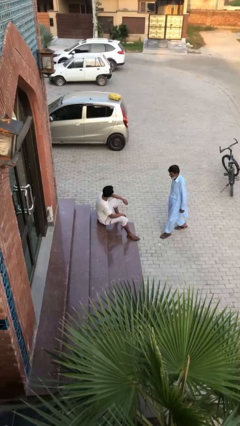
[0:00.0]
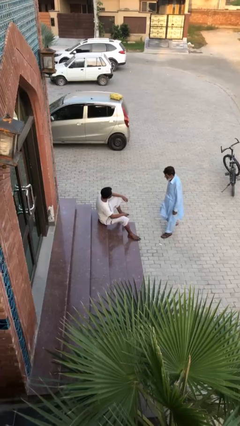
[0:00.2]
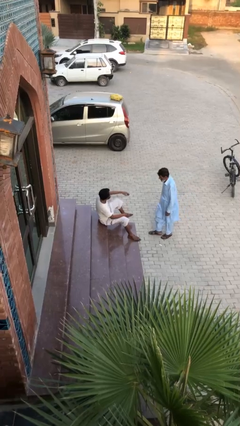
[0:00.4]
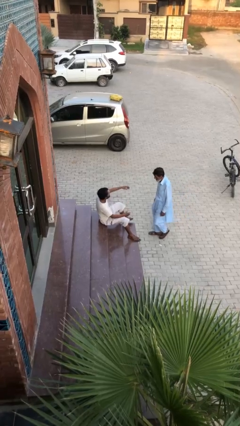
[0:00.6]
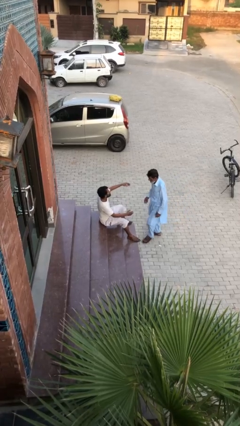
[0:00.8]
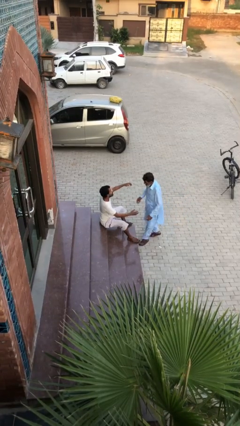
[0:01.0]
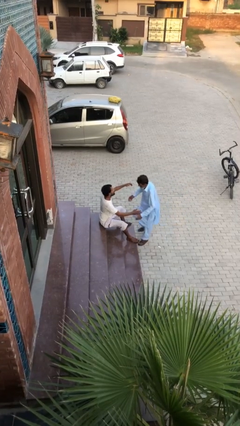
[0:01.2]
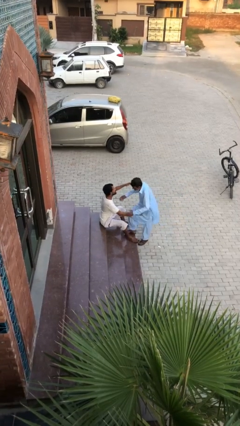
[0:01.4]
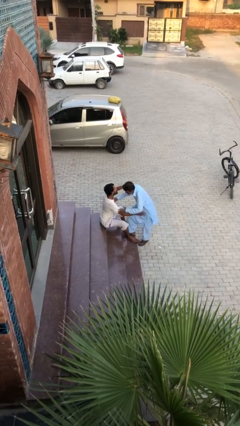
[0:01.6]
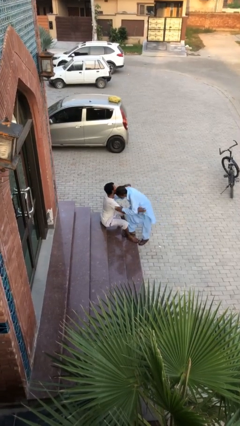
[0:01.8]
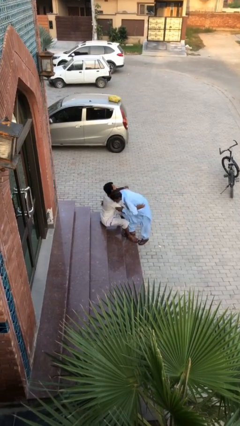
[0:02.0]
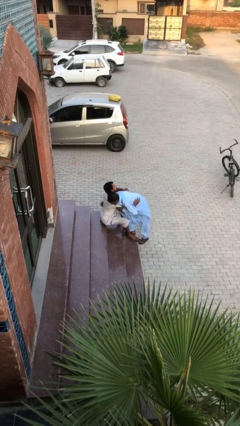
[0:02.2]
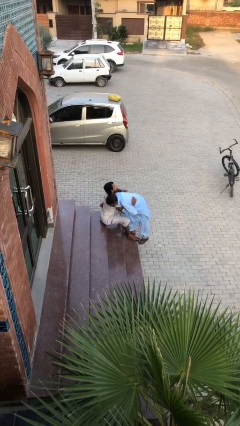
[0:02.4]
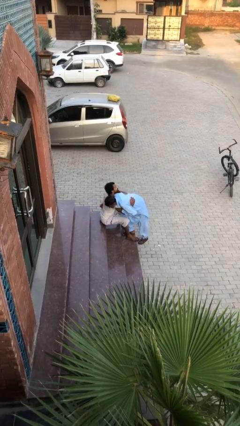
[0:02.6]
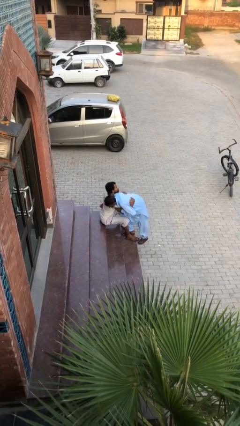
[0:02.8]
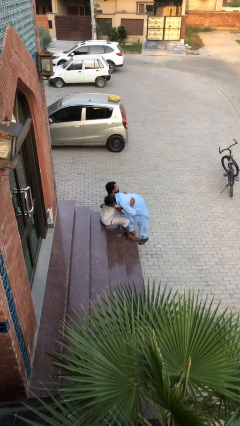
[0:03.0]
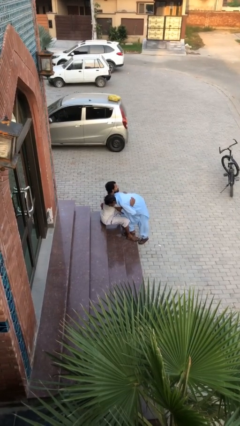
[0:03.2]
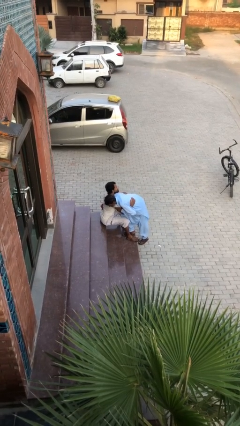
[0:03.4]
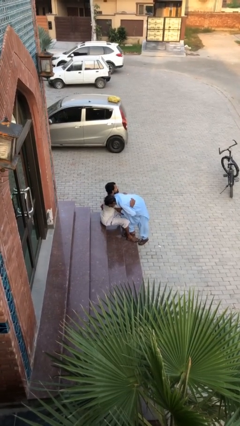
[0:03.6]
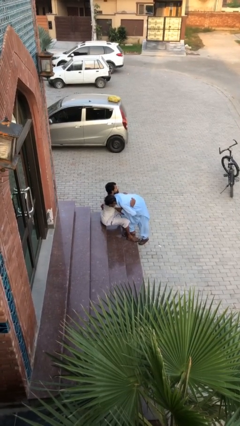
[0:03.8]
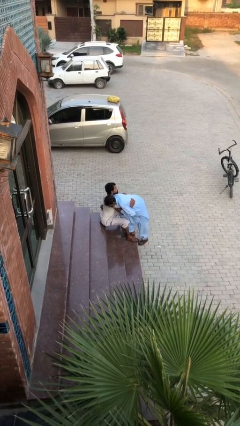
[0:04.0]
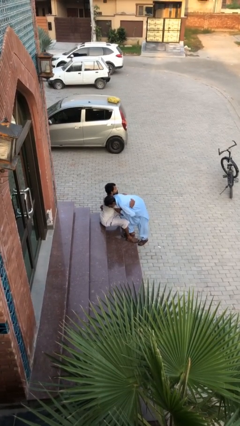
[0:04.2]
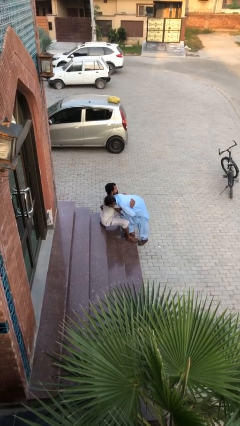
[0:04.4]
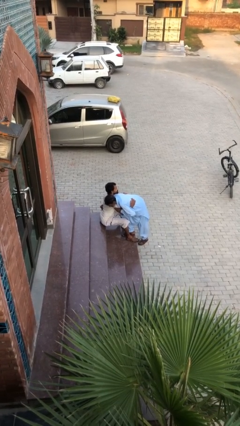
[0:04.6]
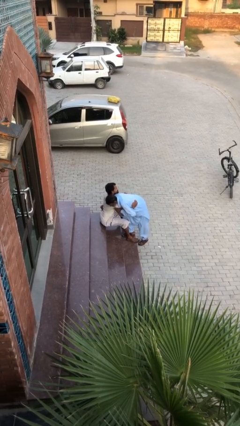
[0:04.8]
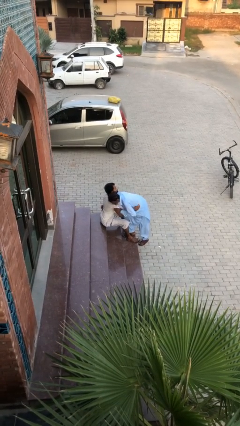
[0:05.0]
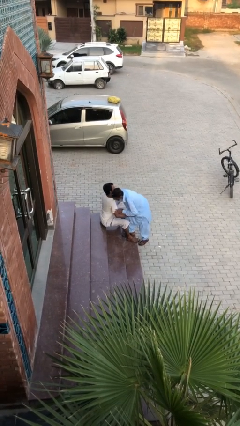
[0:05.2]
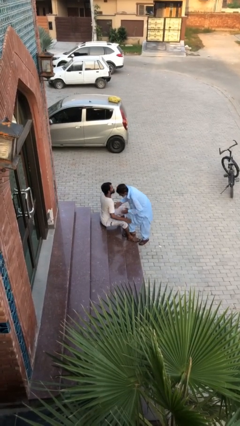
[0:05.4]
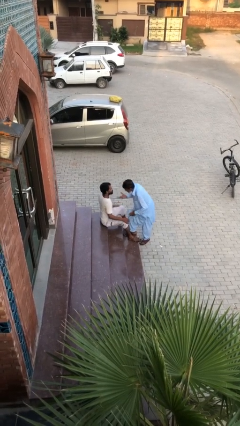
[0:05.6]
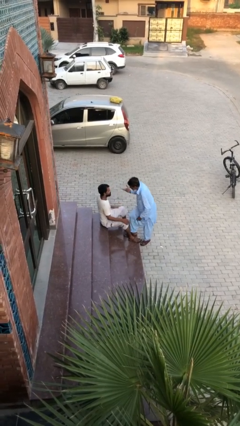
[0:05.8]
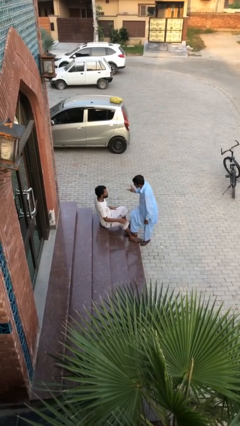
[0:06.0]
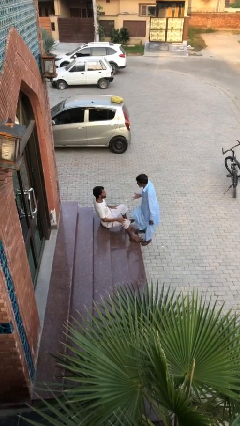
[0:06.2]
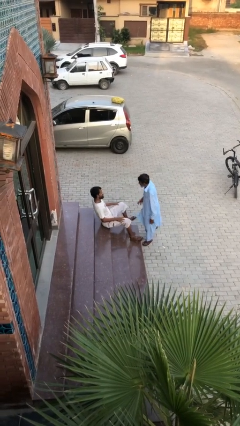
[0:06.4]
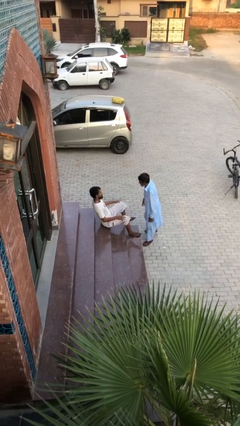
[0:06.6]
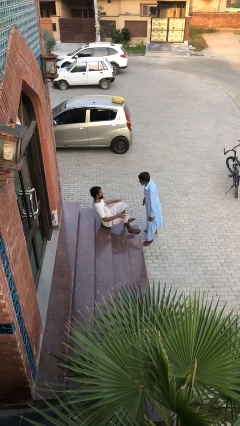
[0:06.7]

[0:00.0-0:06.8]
person embraces person

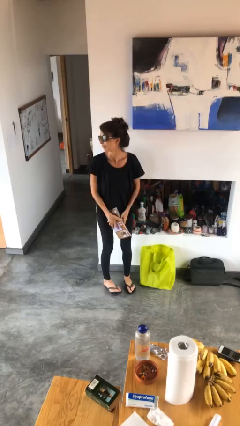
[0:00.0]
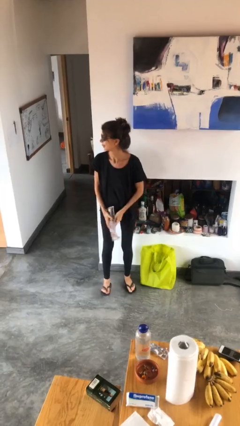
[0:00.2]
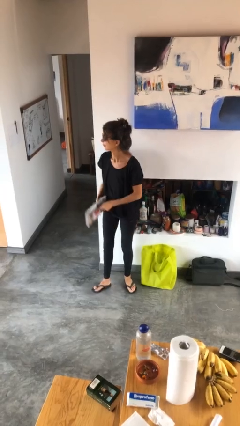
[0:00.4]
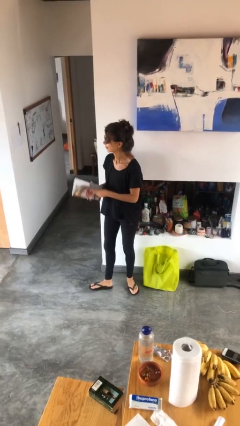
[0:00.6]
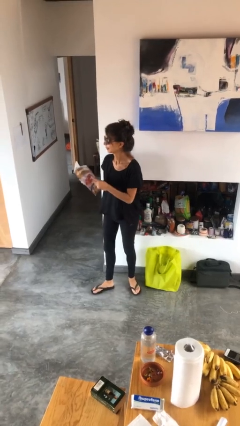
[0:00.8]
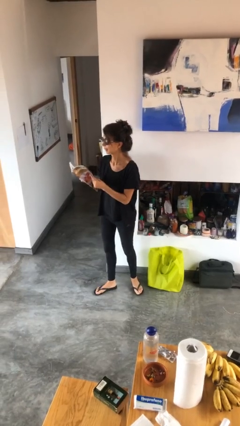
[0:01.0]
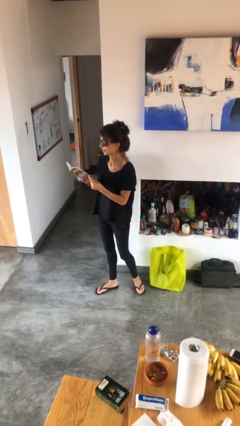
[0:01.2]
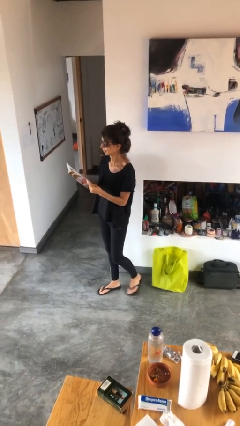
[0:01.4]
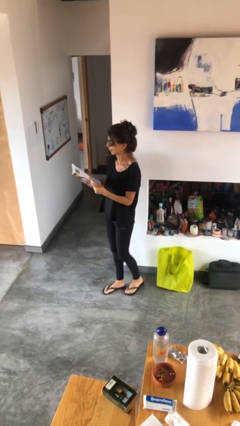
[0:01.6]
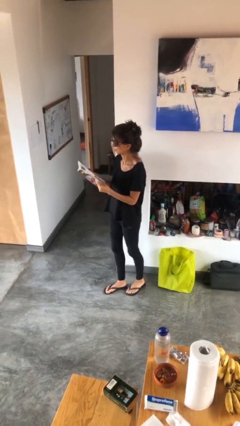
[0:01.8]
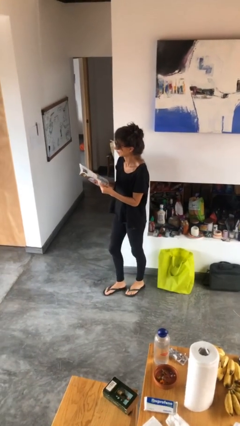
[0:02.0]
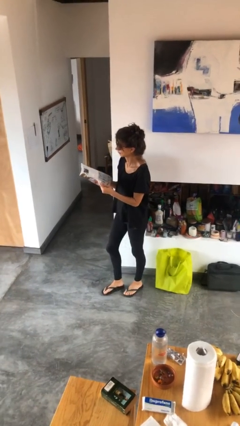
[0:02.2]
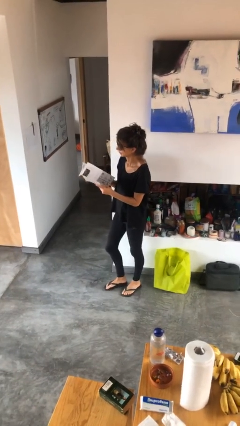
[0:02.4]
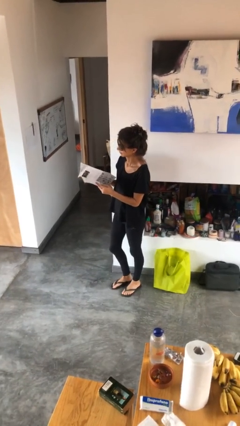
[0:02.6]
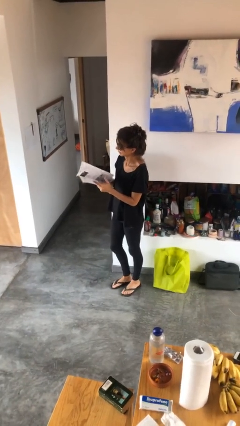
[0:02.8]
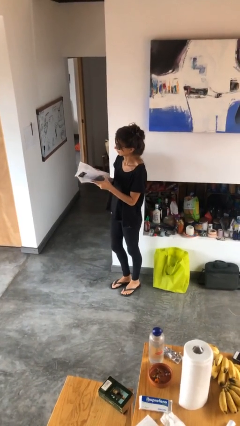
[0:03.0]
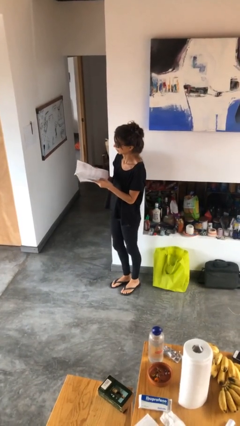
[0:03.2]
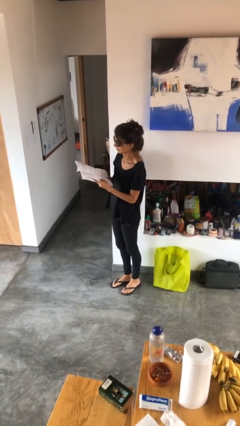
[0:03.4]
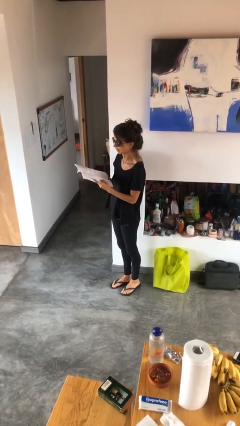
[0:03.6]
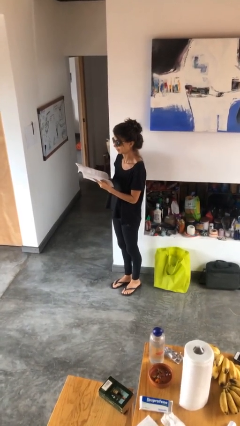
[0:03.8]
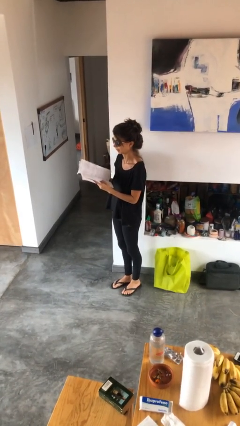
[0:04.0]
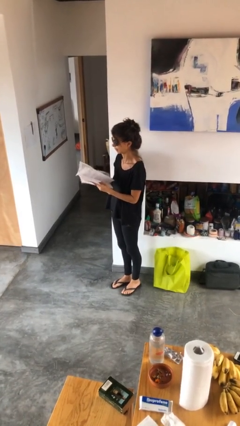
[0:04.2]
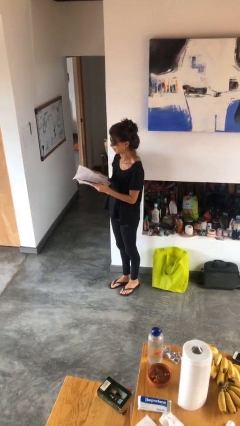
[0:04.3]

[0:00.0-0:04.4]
person reads magazine

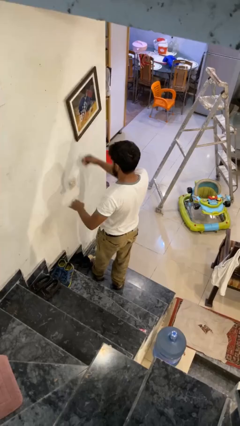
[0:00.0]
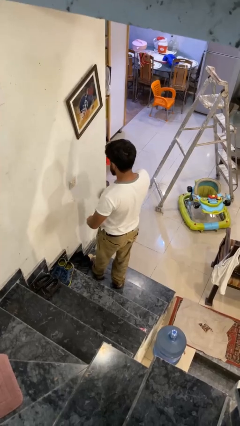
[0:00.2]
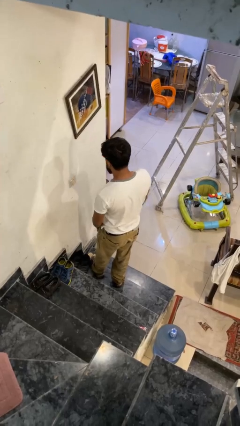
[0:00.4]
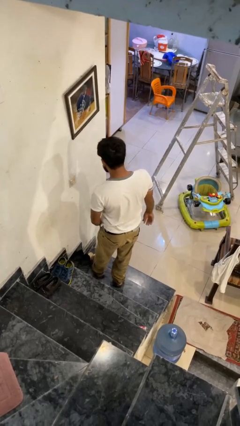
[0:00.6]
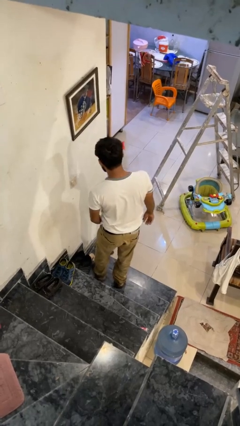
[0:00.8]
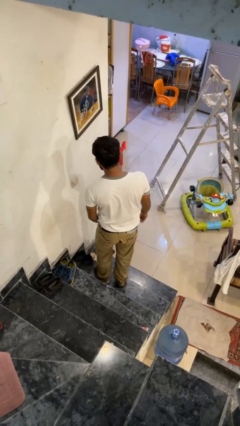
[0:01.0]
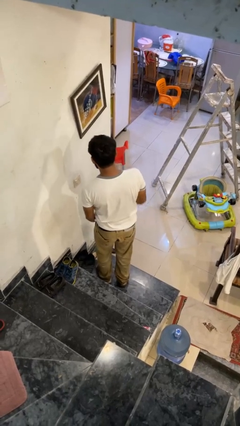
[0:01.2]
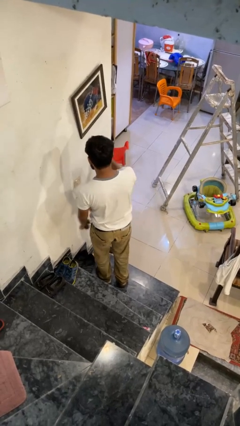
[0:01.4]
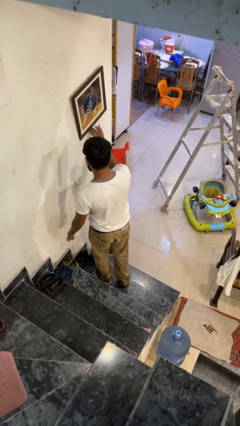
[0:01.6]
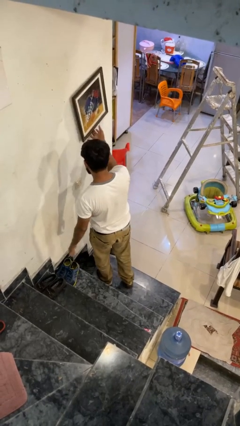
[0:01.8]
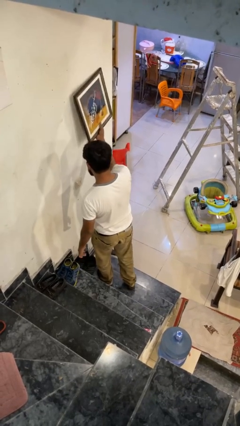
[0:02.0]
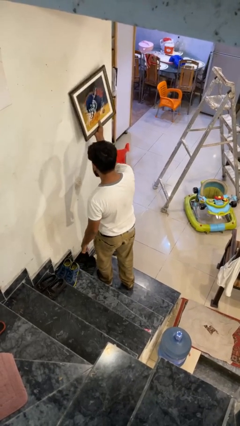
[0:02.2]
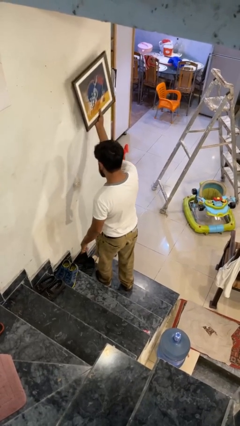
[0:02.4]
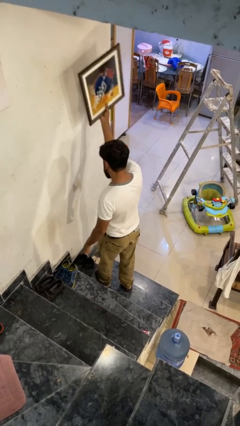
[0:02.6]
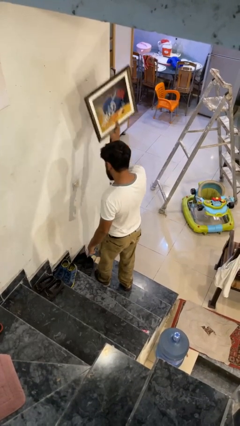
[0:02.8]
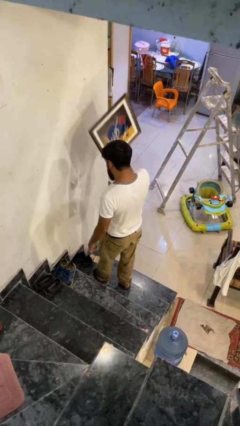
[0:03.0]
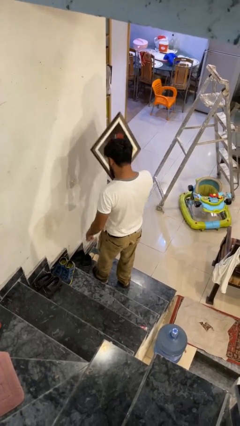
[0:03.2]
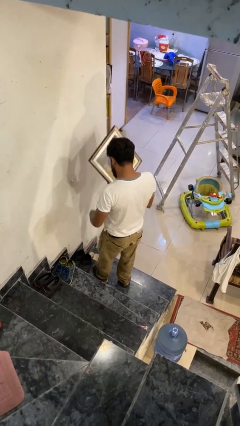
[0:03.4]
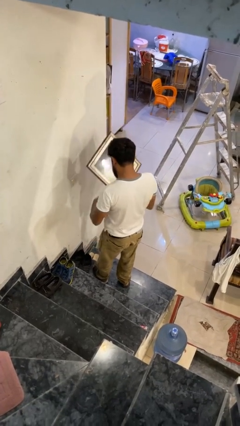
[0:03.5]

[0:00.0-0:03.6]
person takes down picture frame

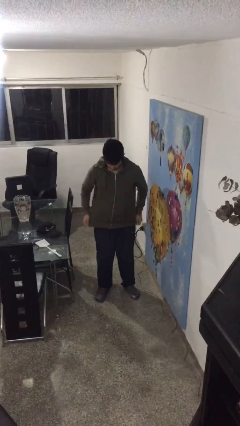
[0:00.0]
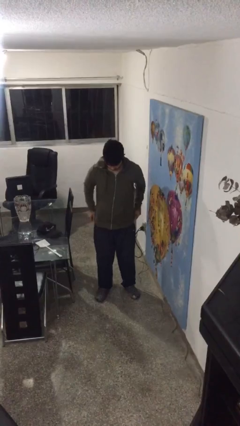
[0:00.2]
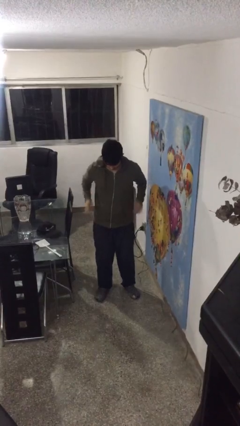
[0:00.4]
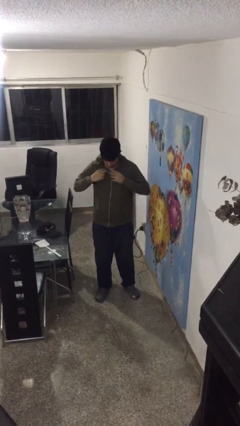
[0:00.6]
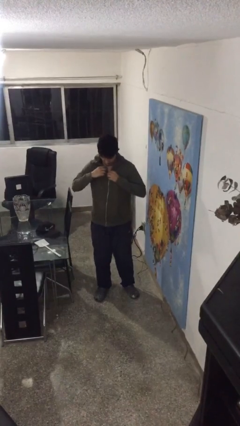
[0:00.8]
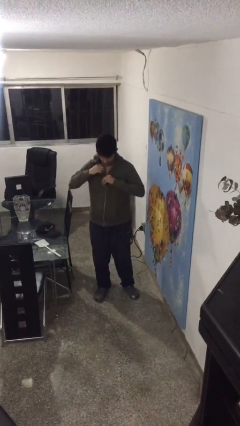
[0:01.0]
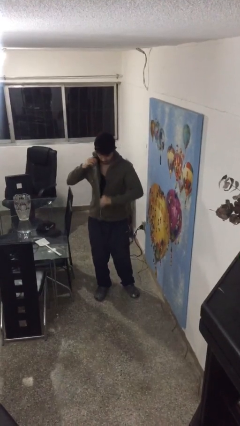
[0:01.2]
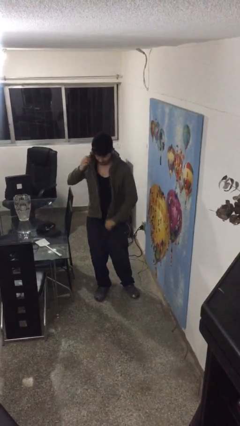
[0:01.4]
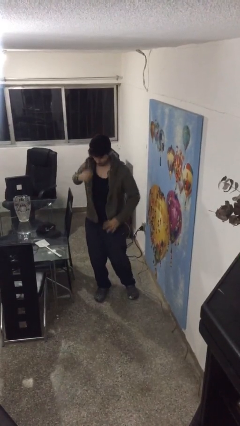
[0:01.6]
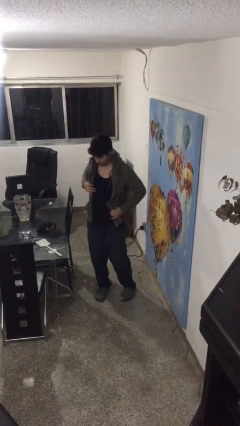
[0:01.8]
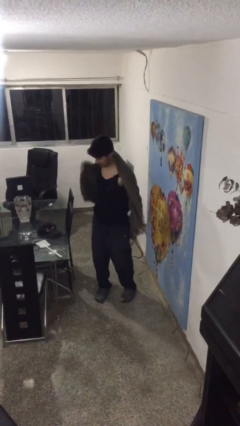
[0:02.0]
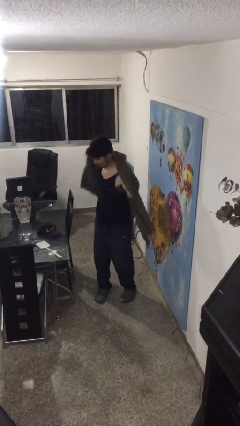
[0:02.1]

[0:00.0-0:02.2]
person unzips jacket

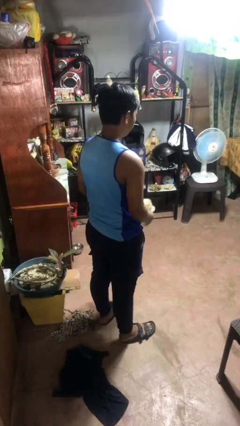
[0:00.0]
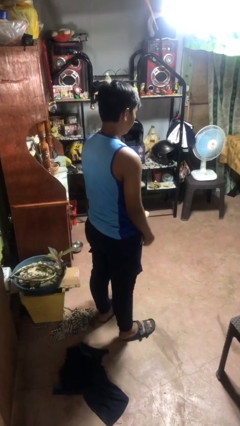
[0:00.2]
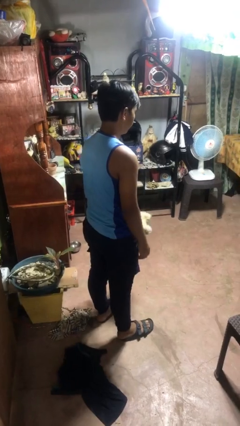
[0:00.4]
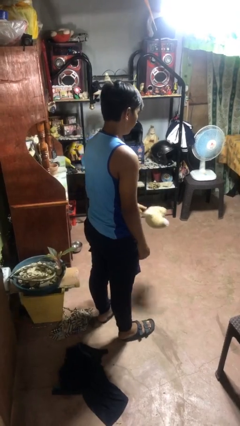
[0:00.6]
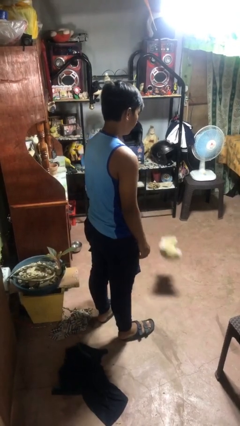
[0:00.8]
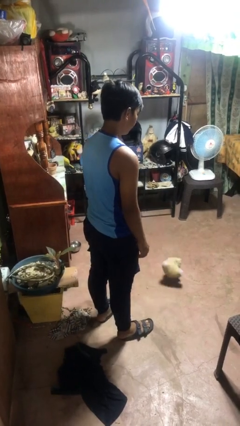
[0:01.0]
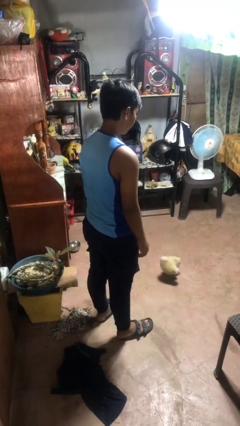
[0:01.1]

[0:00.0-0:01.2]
person throws object to ground
